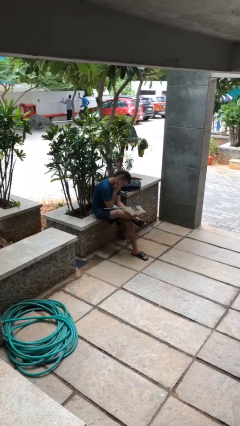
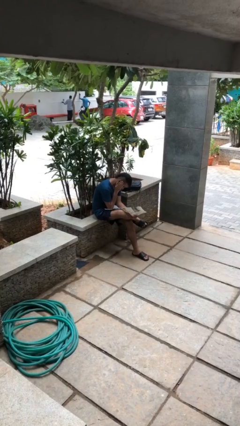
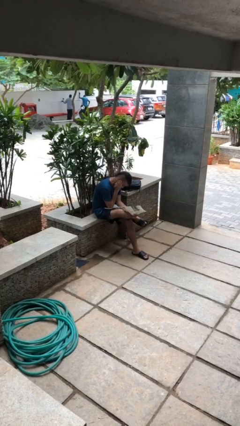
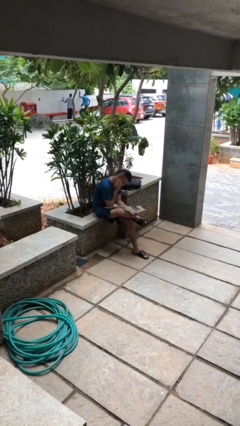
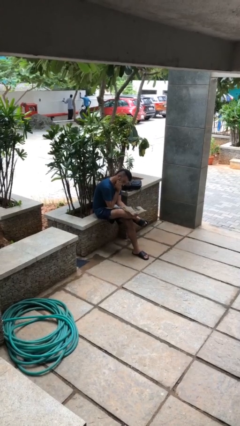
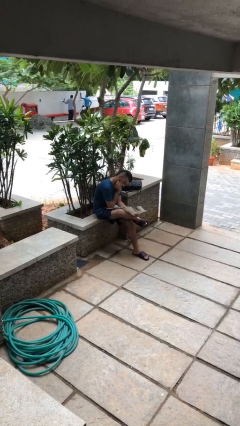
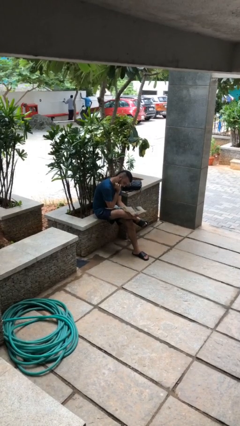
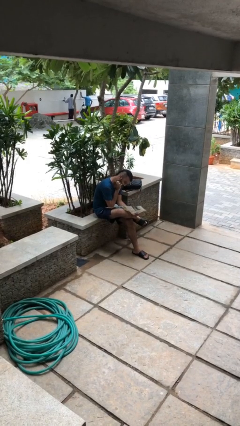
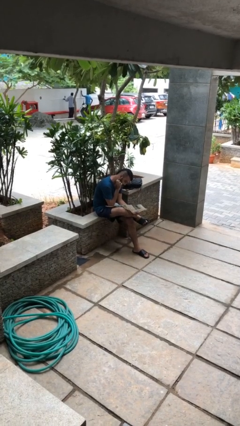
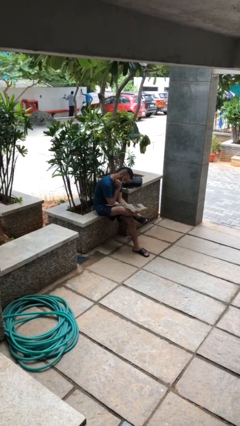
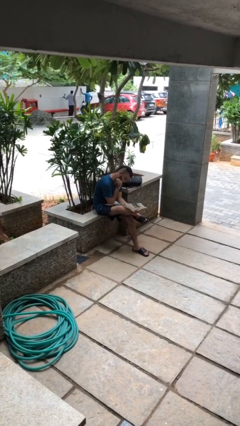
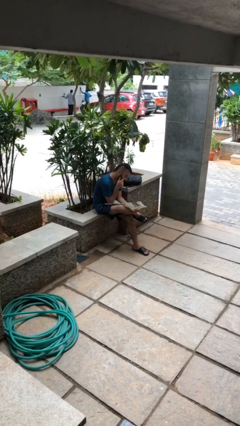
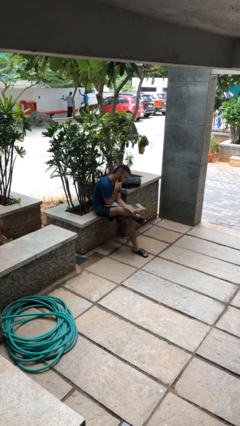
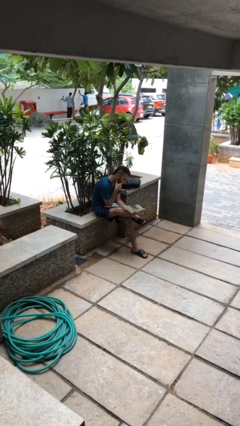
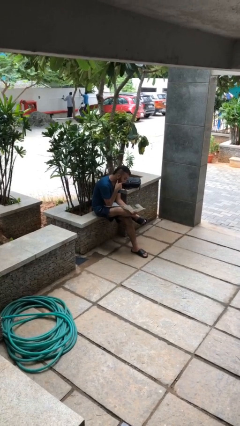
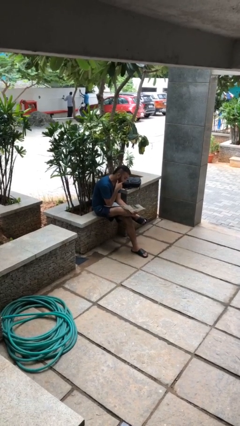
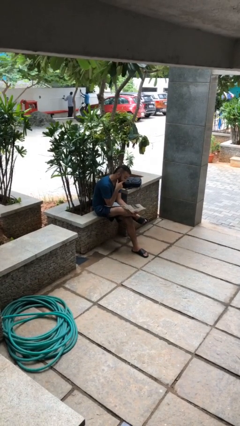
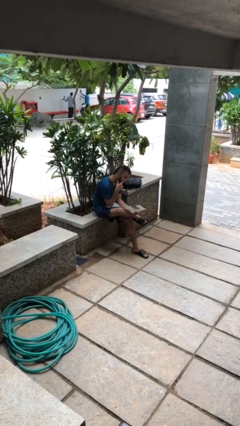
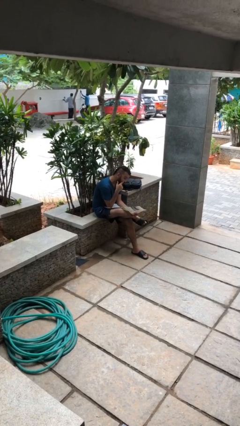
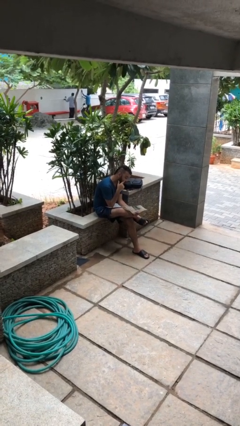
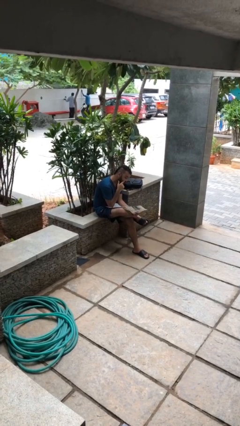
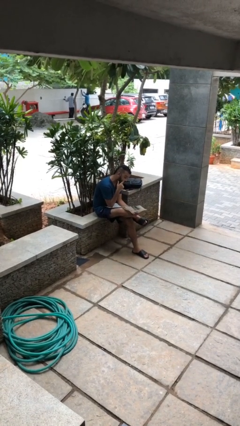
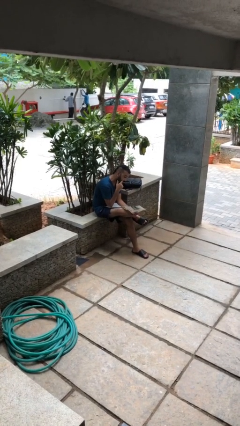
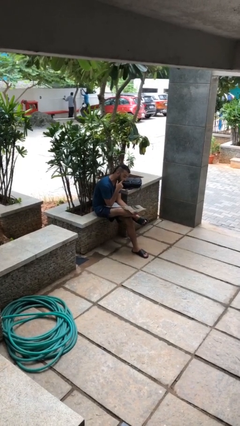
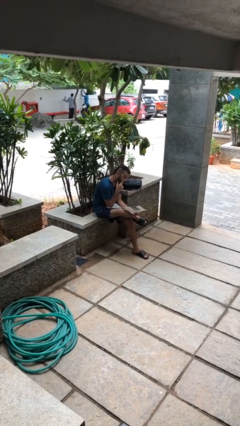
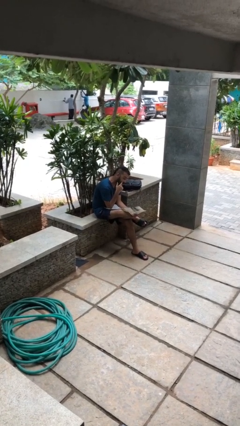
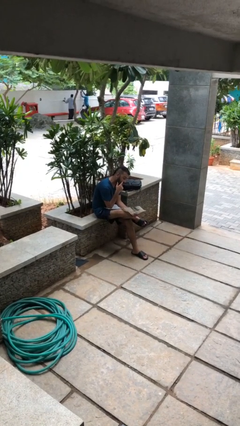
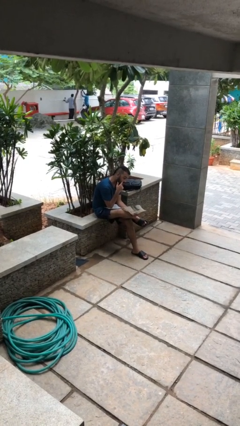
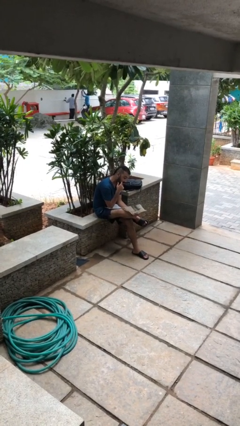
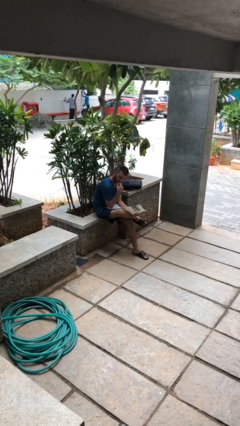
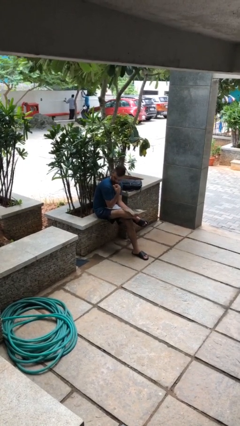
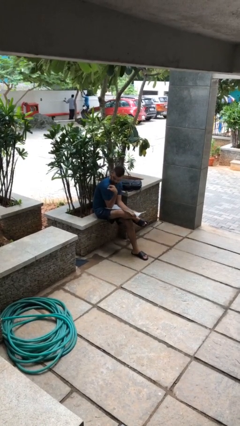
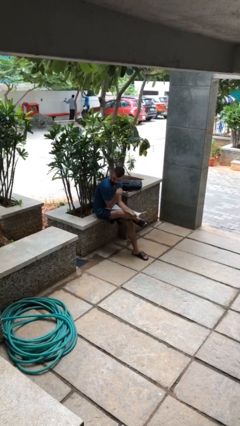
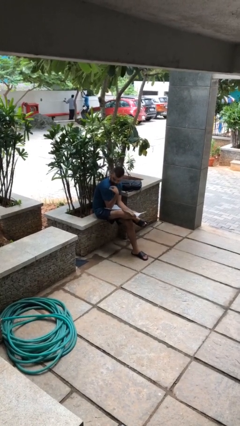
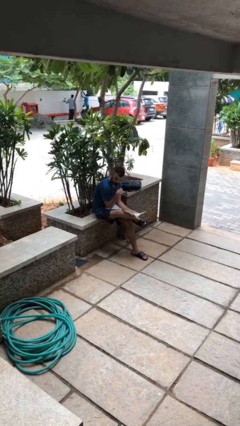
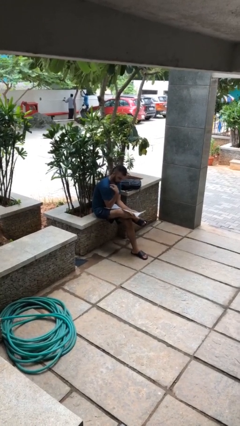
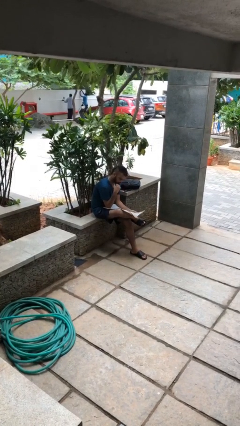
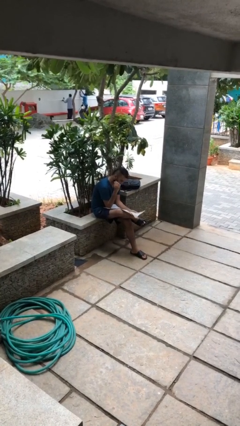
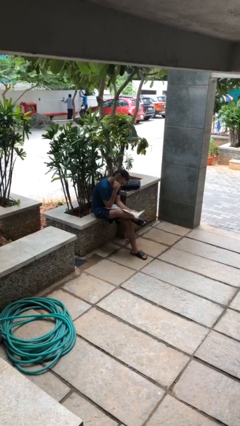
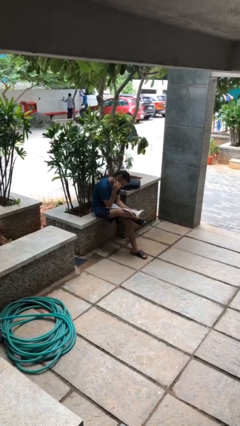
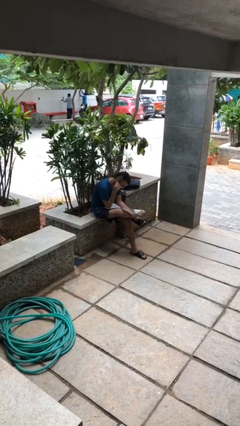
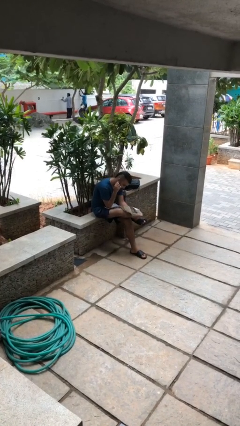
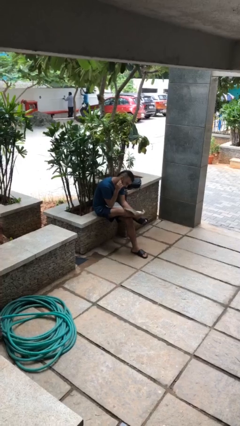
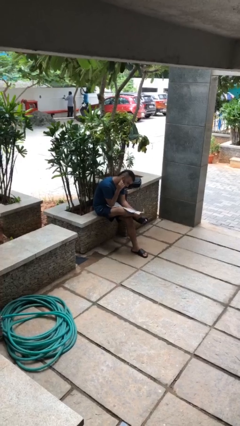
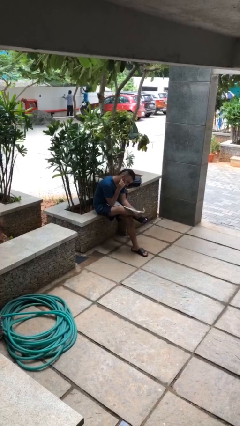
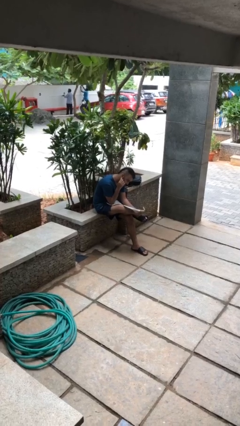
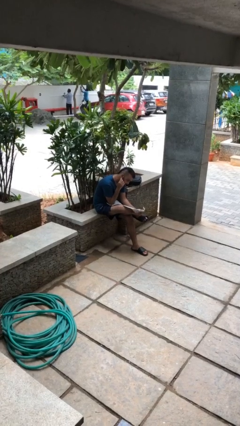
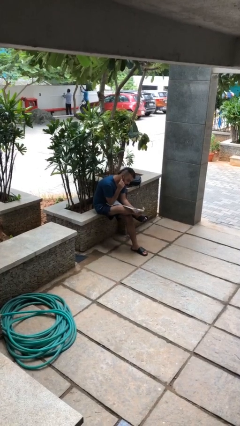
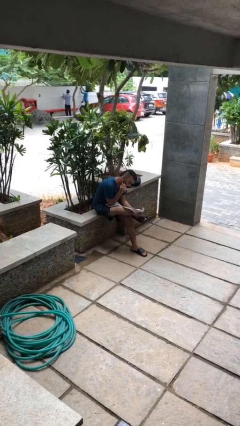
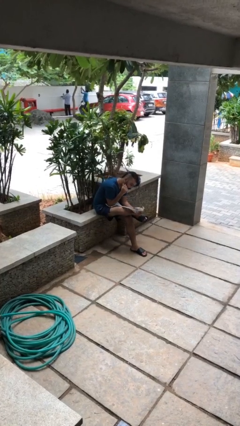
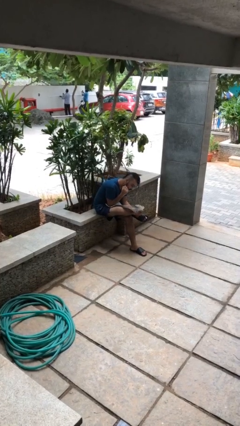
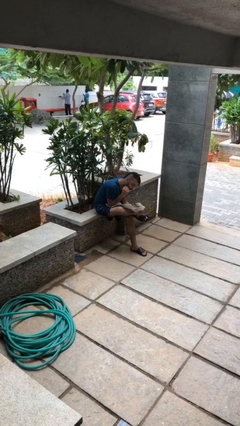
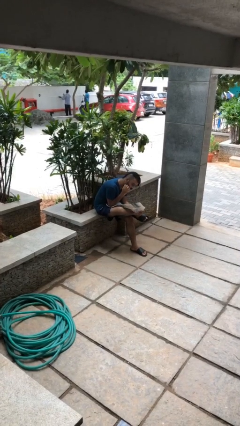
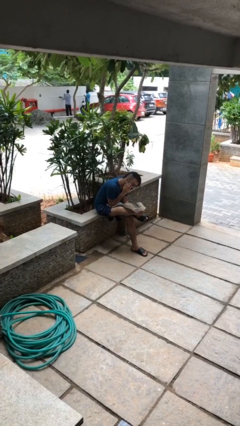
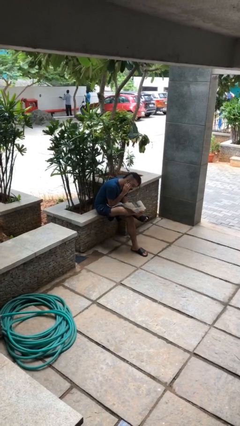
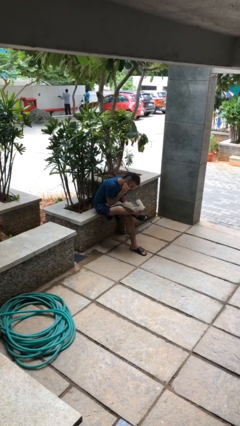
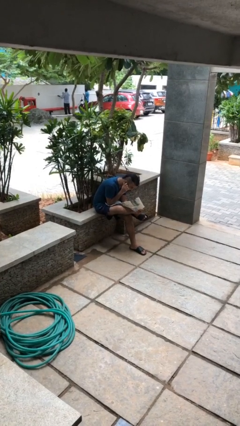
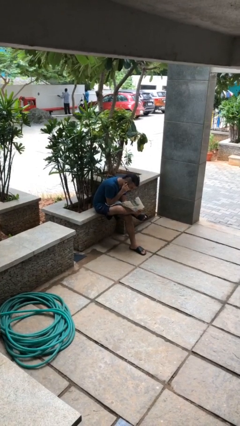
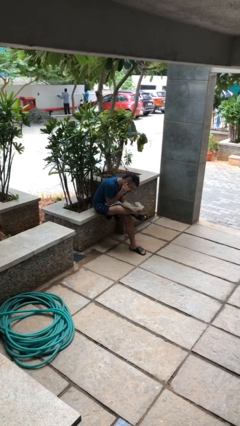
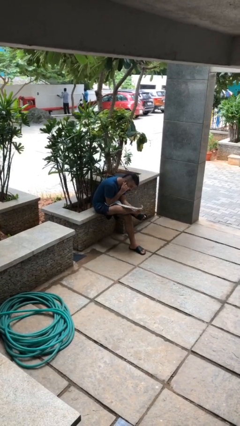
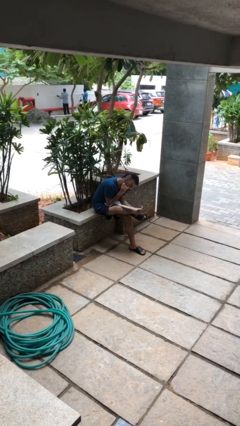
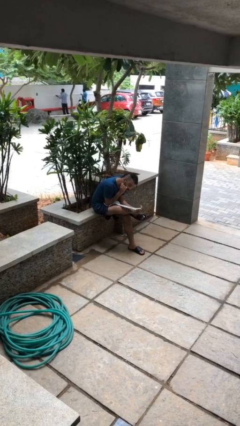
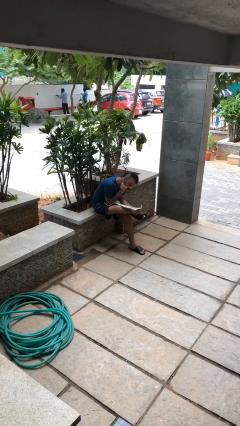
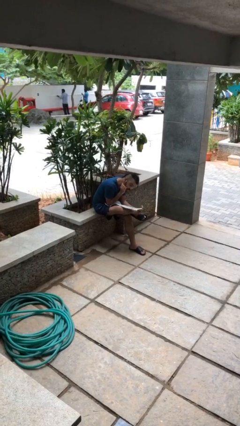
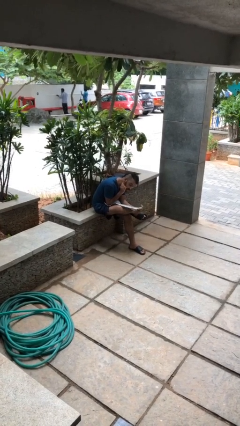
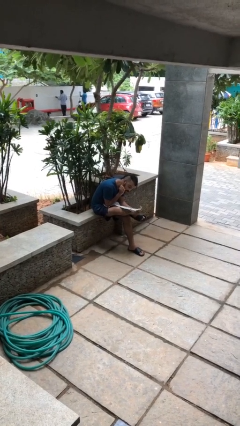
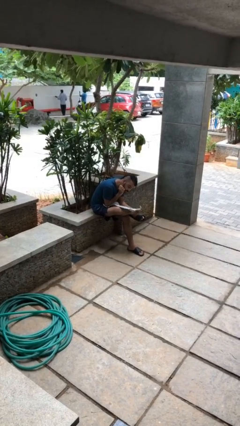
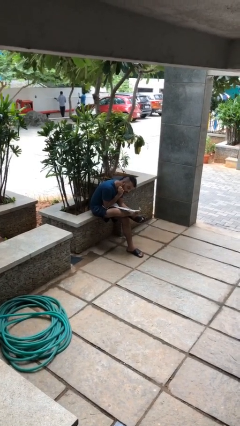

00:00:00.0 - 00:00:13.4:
person reads document

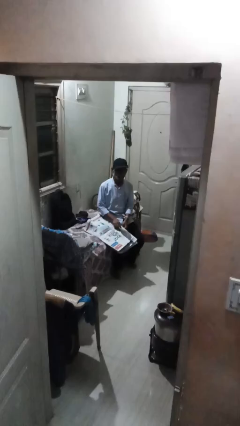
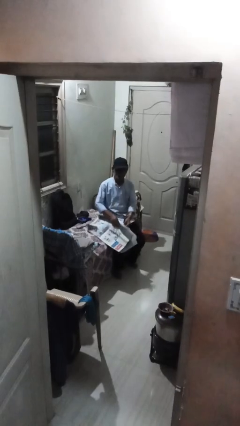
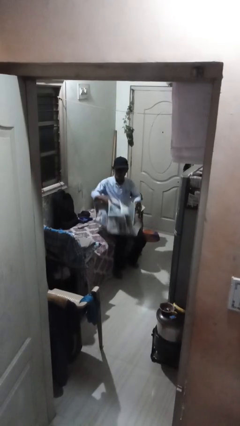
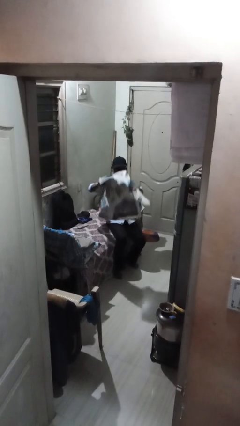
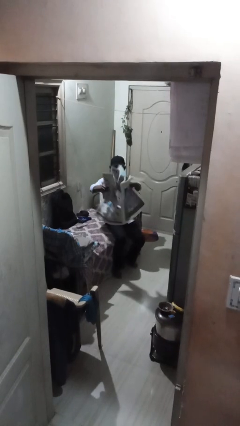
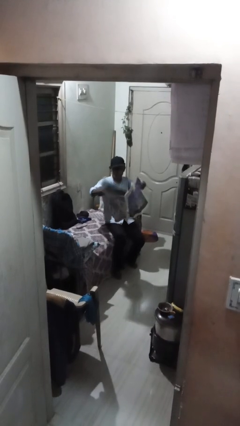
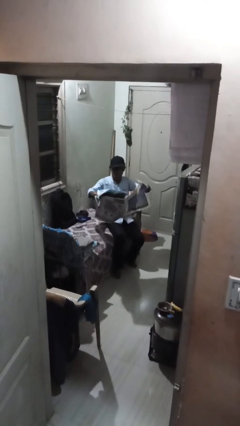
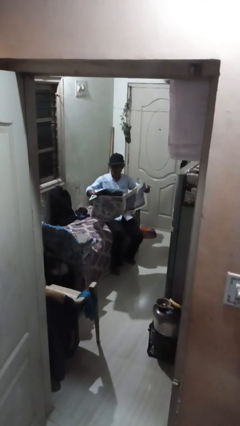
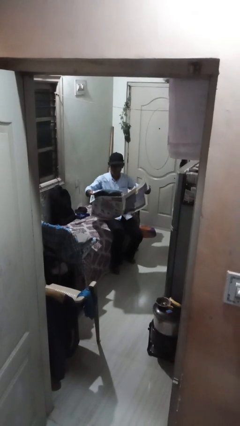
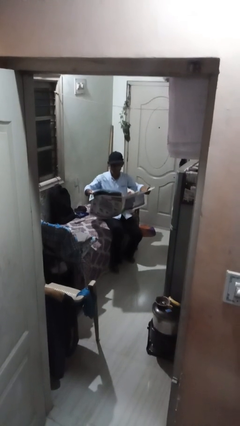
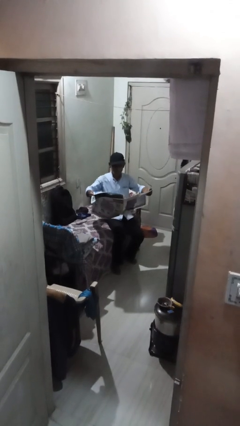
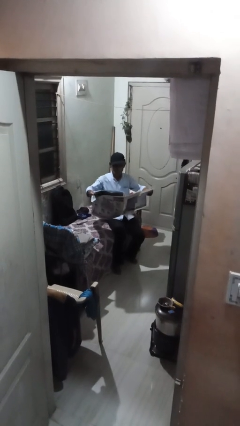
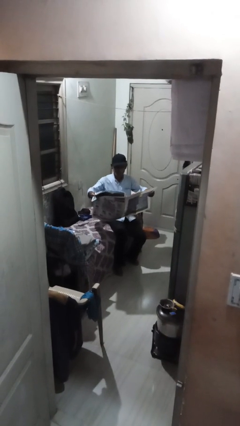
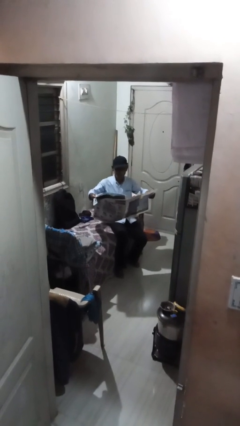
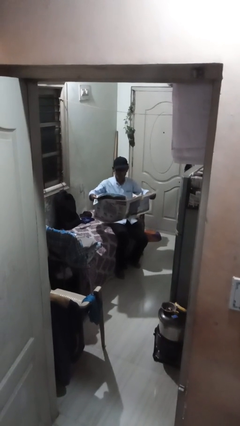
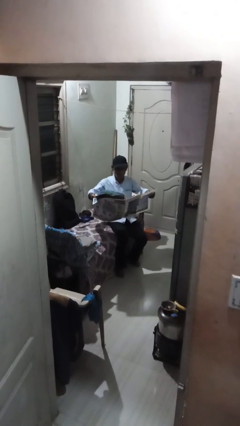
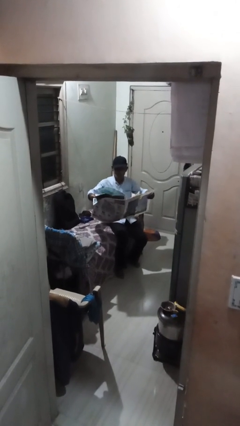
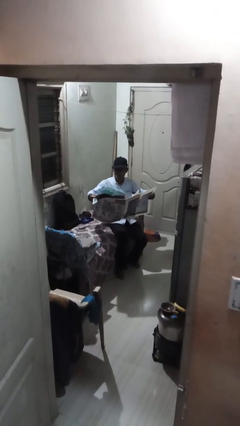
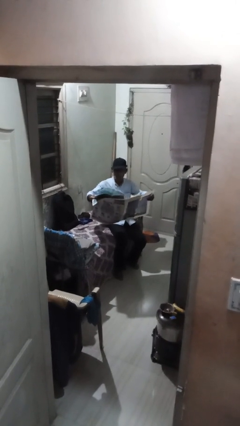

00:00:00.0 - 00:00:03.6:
person reads newspaper
